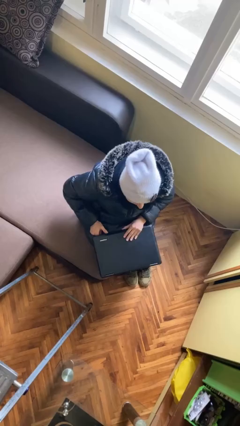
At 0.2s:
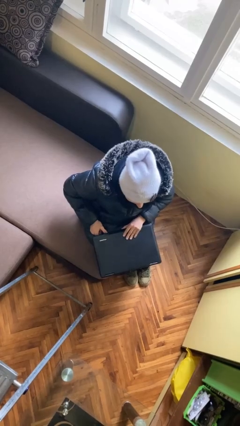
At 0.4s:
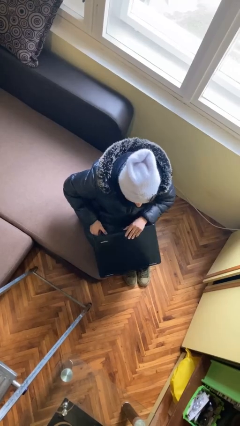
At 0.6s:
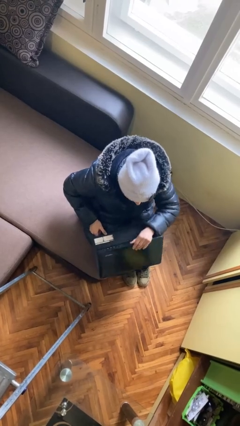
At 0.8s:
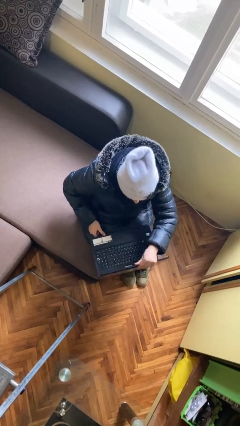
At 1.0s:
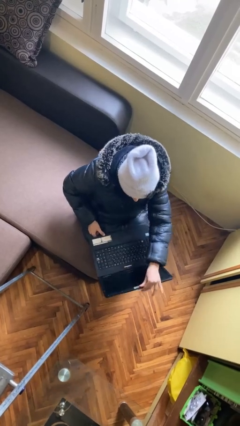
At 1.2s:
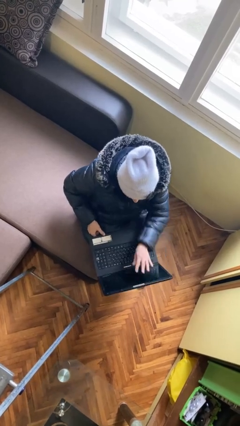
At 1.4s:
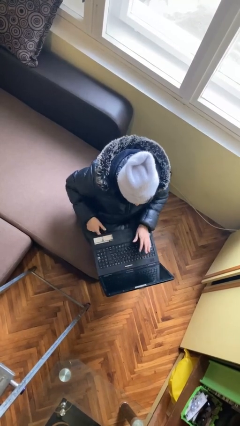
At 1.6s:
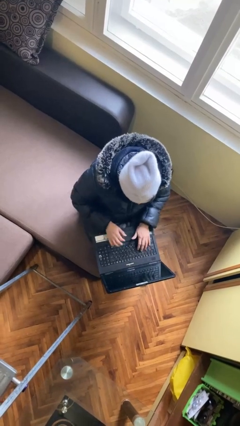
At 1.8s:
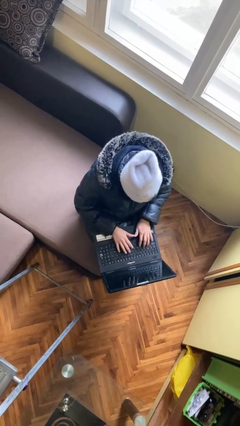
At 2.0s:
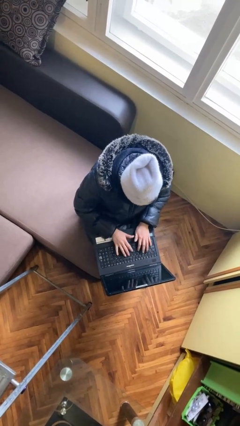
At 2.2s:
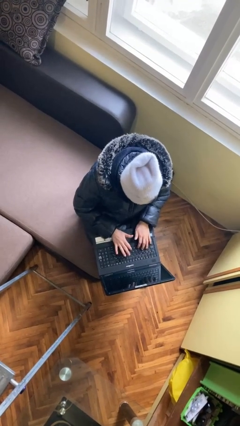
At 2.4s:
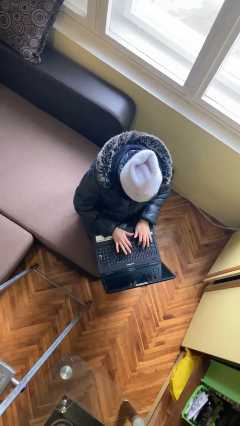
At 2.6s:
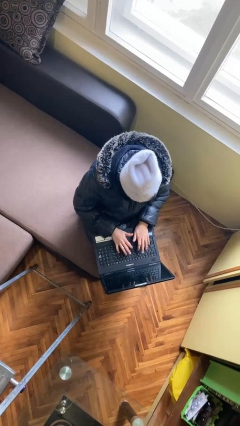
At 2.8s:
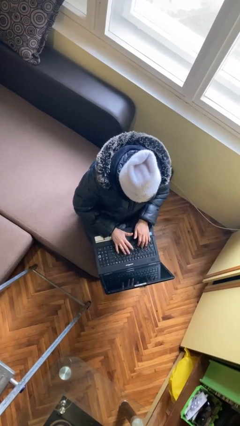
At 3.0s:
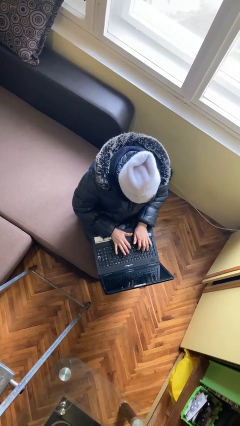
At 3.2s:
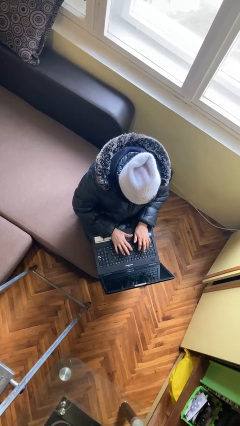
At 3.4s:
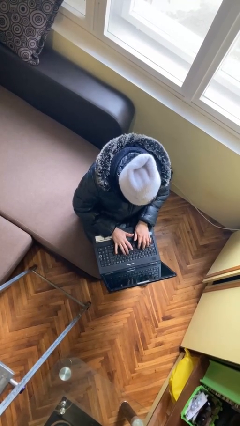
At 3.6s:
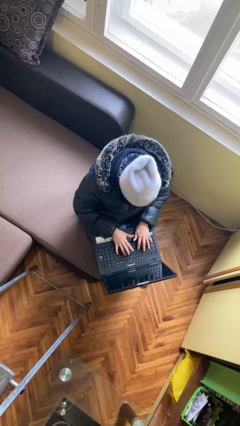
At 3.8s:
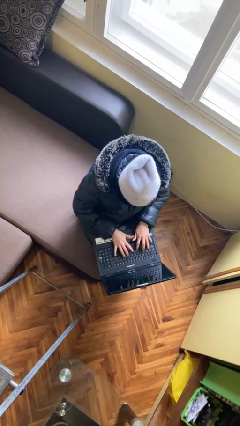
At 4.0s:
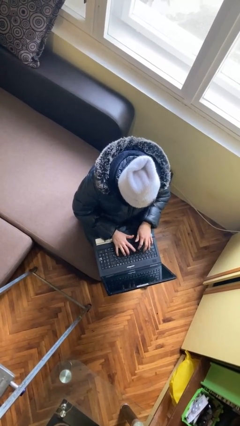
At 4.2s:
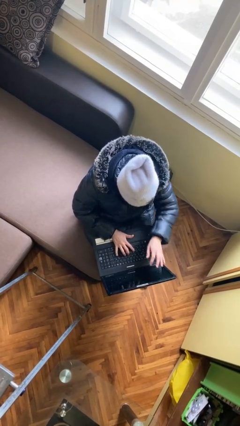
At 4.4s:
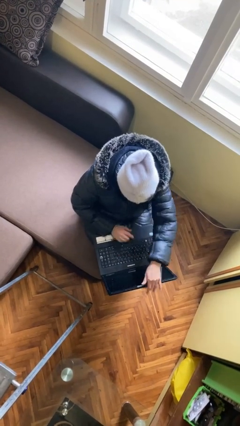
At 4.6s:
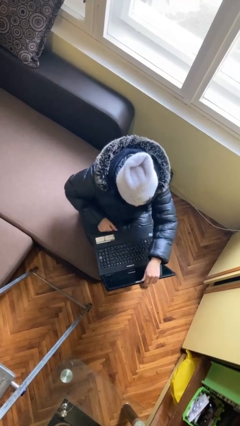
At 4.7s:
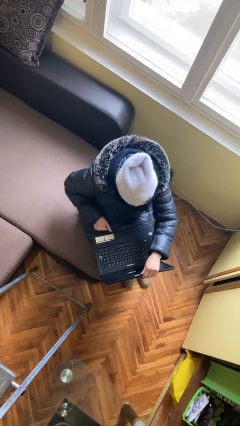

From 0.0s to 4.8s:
person interacts with laptop

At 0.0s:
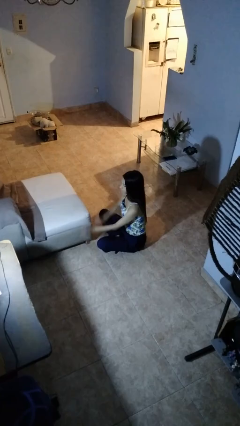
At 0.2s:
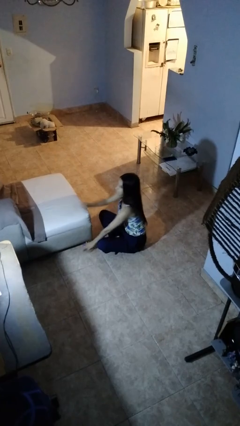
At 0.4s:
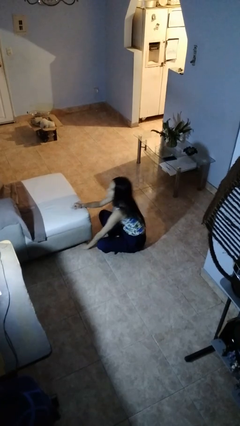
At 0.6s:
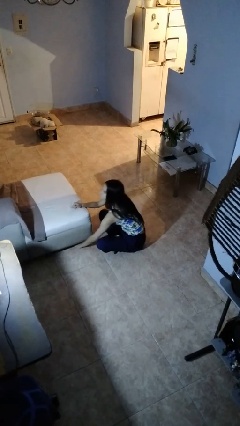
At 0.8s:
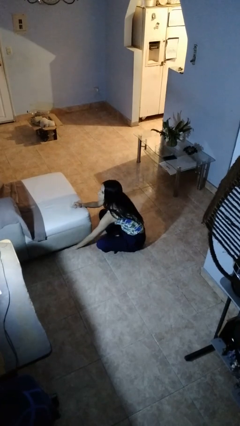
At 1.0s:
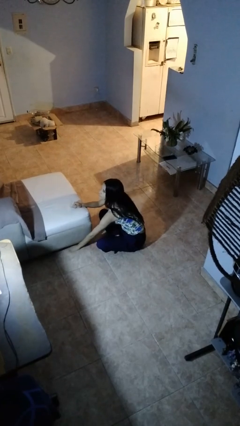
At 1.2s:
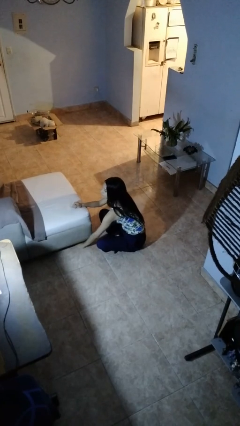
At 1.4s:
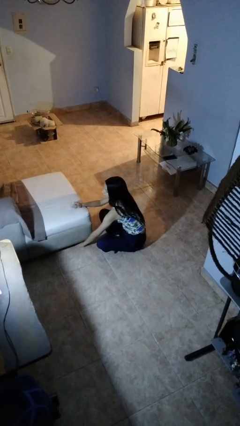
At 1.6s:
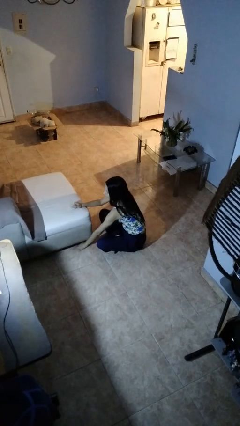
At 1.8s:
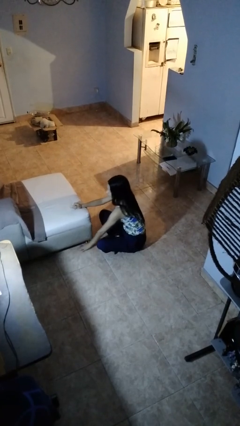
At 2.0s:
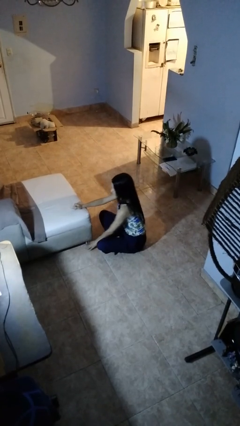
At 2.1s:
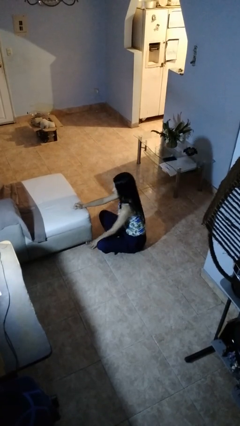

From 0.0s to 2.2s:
person searches under couch

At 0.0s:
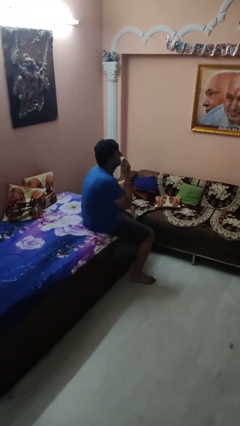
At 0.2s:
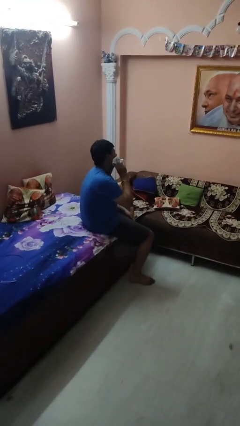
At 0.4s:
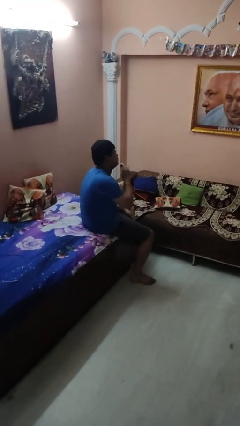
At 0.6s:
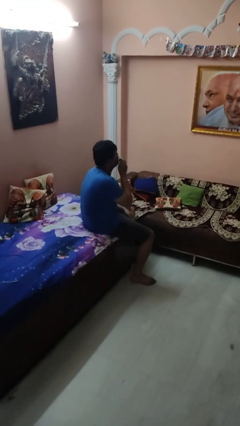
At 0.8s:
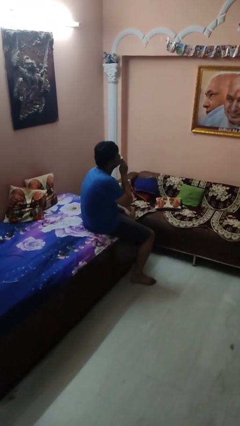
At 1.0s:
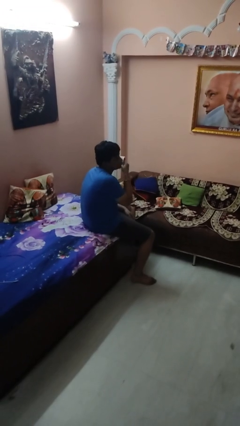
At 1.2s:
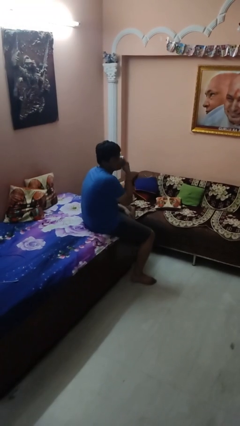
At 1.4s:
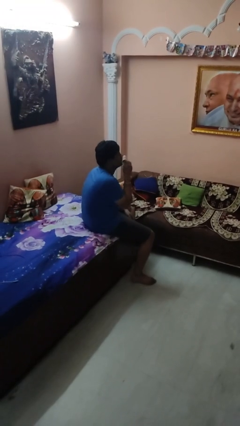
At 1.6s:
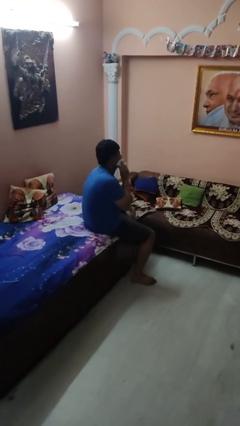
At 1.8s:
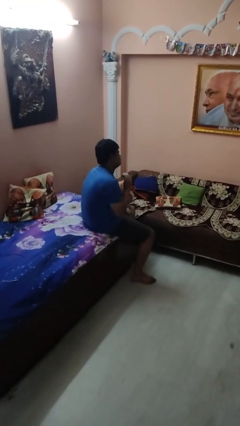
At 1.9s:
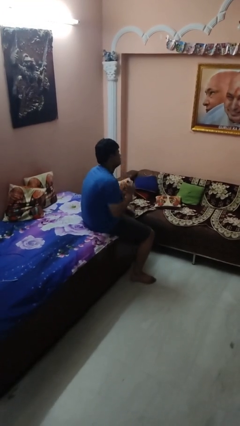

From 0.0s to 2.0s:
person wipes mouth with napkin

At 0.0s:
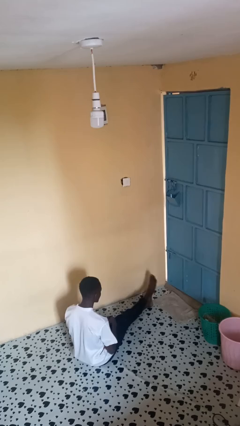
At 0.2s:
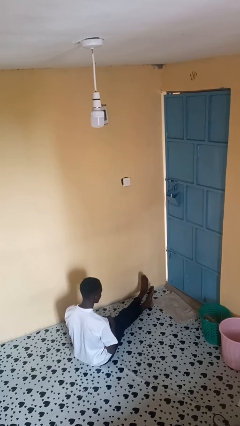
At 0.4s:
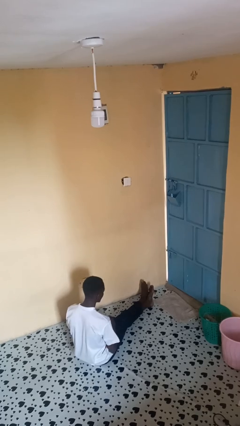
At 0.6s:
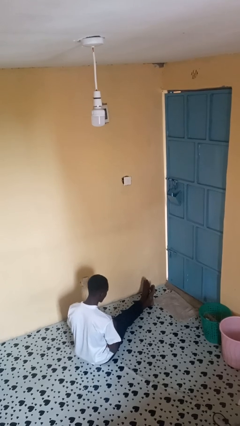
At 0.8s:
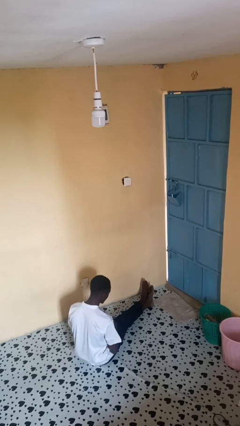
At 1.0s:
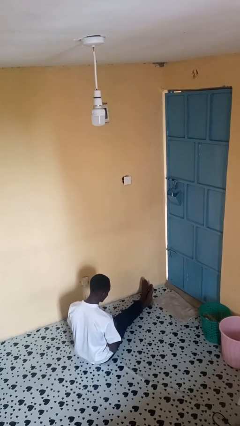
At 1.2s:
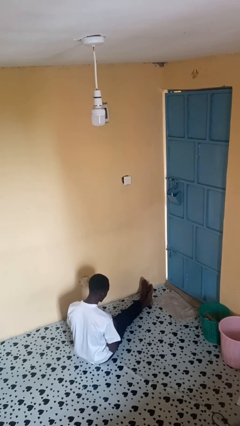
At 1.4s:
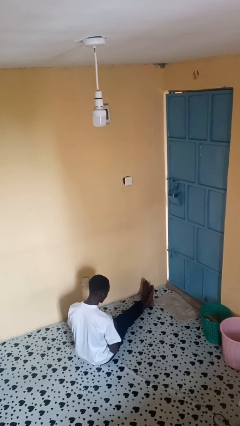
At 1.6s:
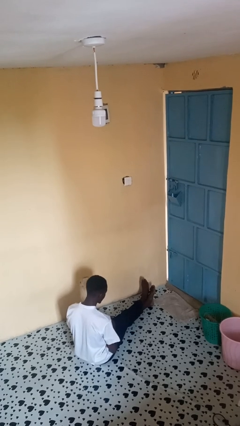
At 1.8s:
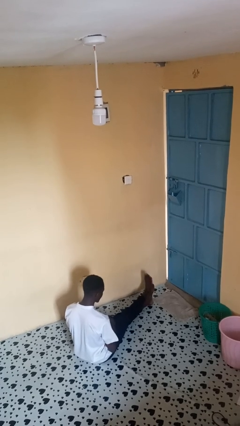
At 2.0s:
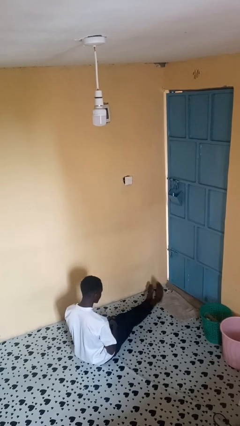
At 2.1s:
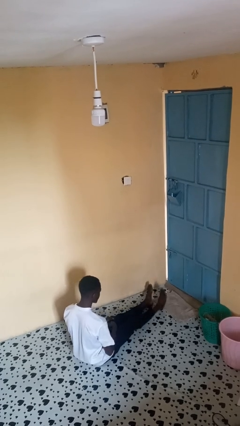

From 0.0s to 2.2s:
person crosses legs

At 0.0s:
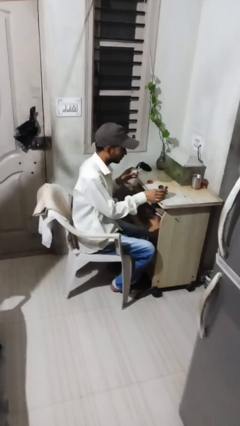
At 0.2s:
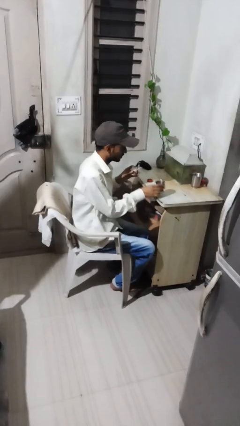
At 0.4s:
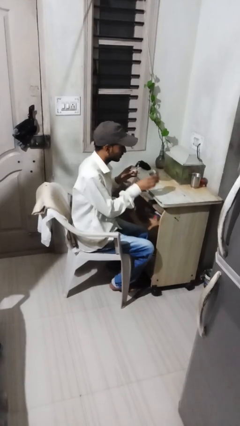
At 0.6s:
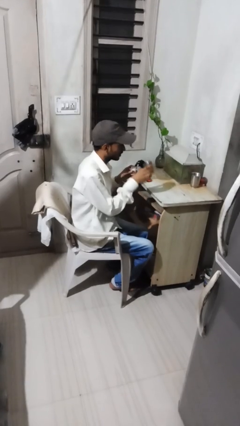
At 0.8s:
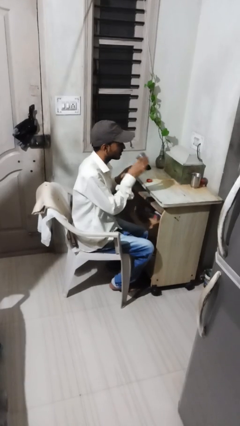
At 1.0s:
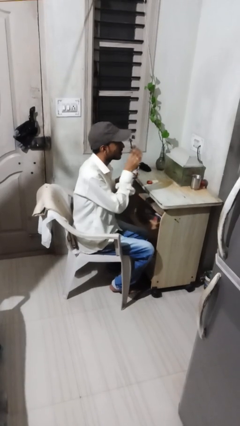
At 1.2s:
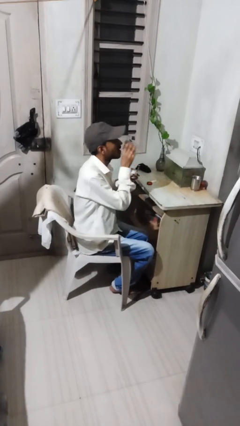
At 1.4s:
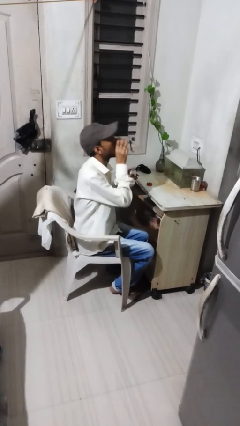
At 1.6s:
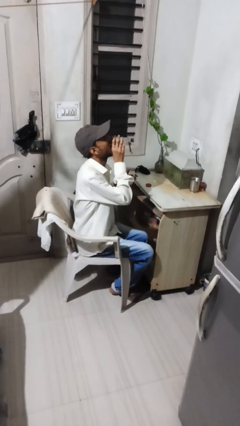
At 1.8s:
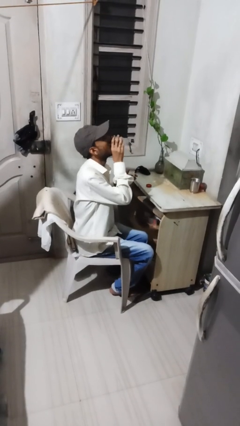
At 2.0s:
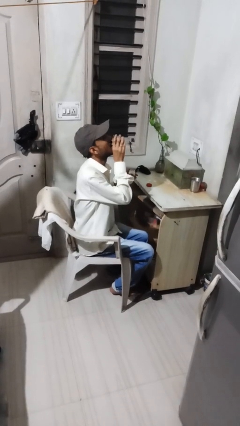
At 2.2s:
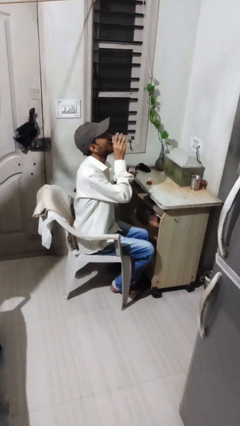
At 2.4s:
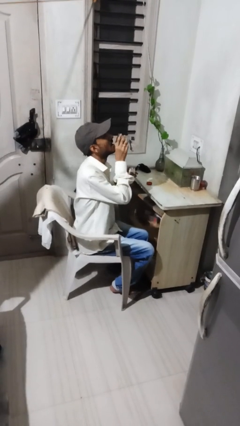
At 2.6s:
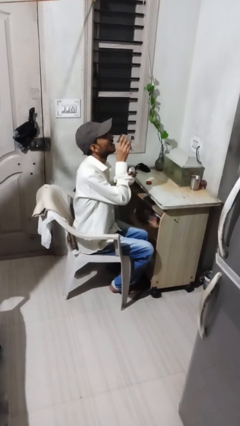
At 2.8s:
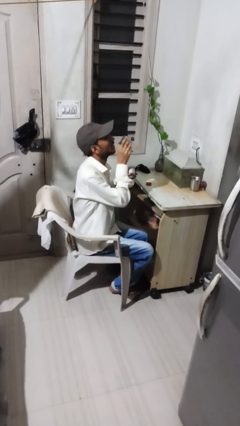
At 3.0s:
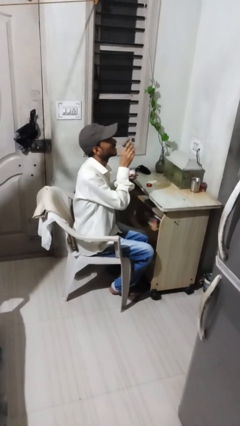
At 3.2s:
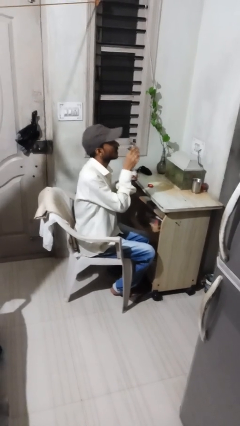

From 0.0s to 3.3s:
person drinks from cup

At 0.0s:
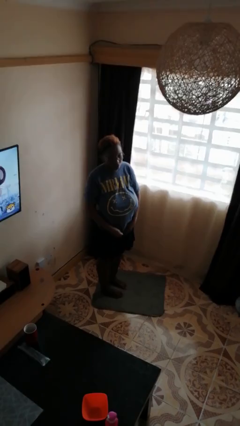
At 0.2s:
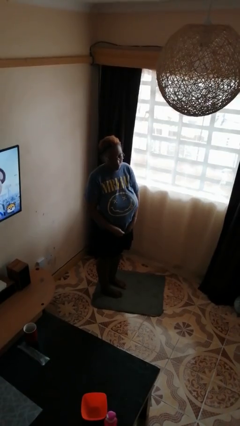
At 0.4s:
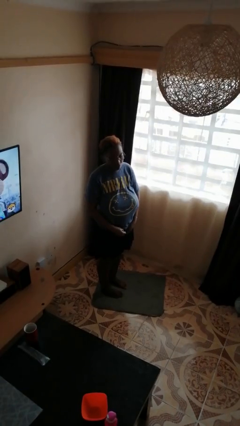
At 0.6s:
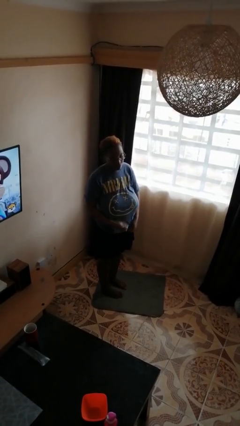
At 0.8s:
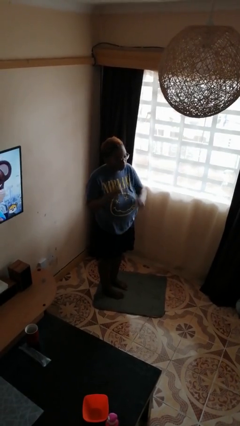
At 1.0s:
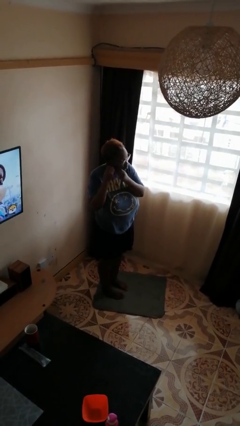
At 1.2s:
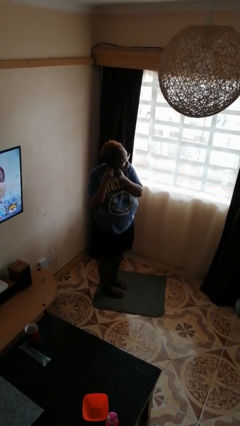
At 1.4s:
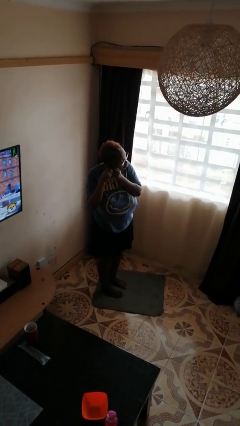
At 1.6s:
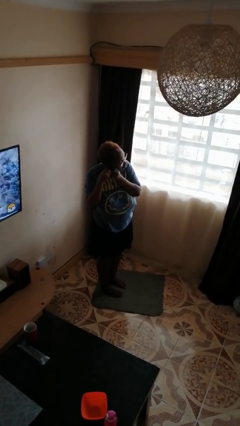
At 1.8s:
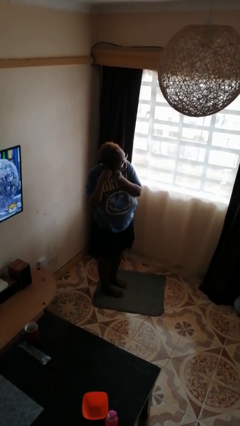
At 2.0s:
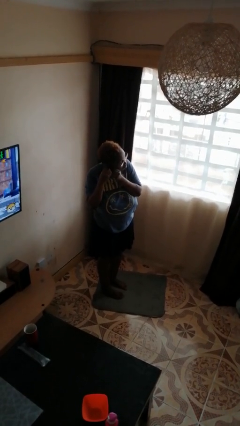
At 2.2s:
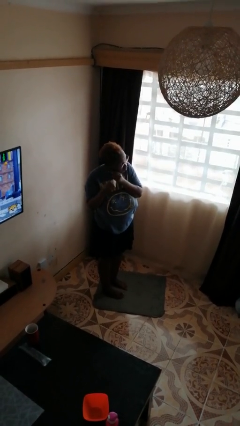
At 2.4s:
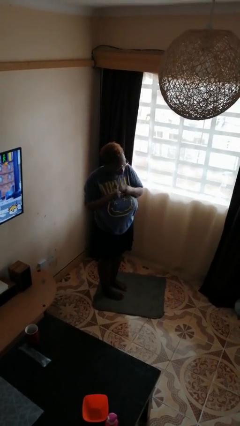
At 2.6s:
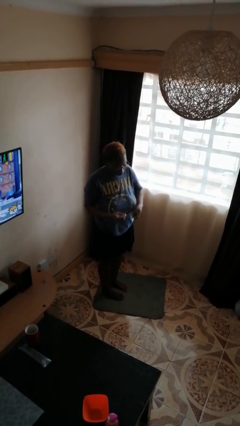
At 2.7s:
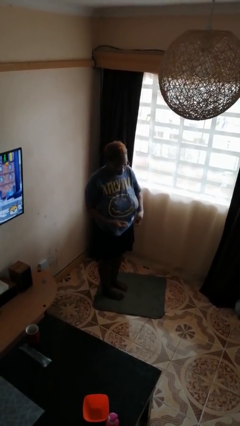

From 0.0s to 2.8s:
person takes off earrings

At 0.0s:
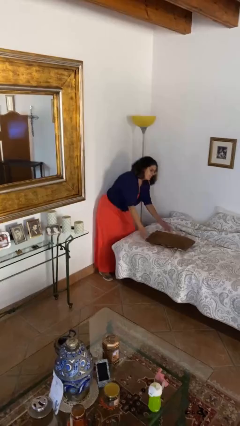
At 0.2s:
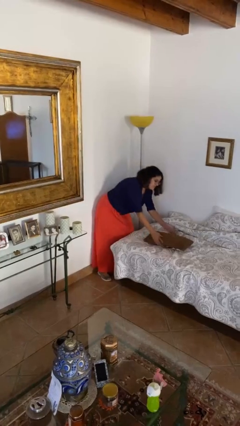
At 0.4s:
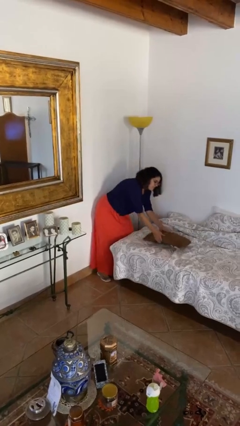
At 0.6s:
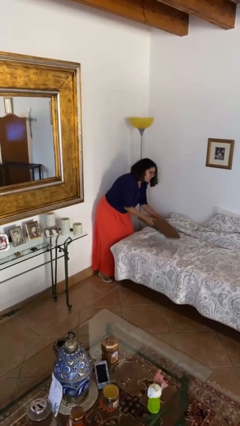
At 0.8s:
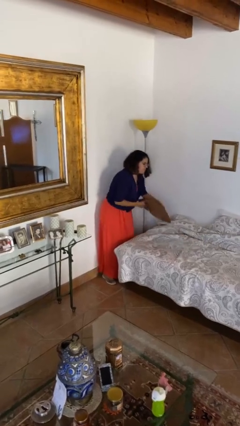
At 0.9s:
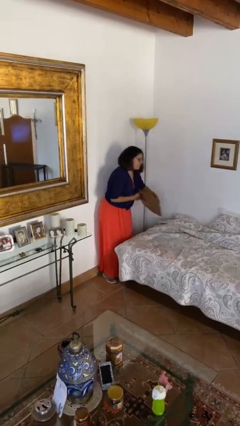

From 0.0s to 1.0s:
person picks up object from bed
